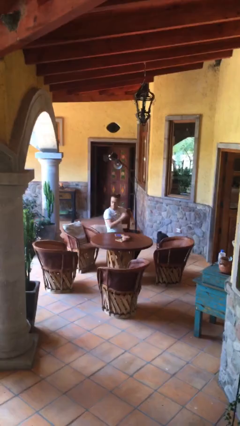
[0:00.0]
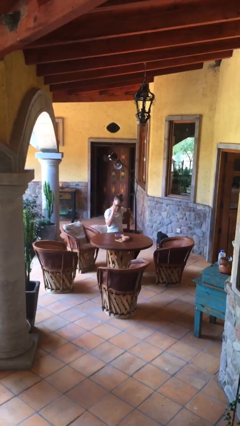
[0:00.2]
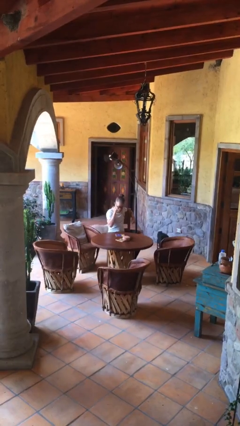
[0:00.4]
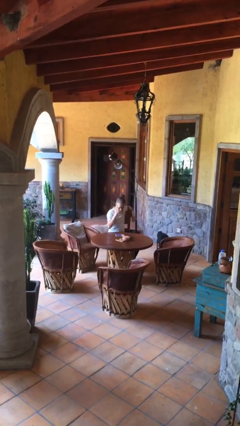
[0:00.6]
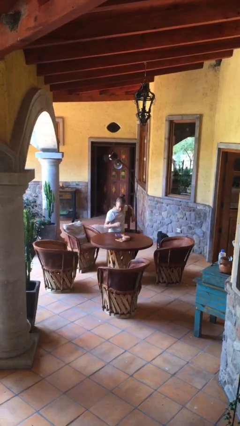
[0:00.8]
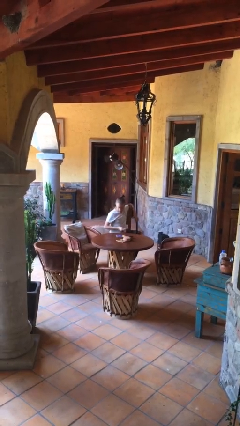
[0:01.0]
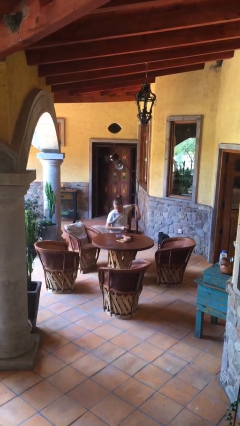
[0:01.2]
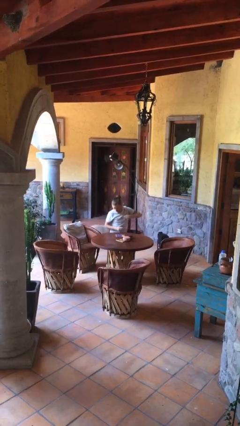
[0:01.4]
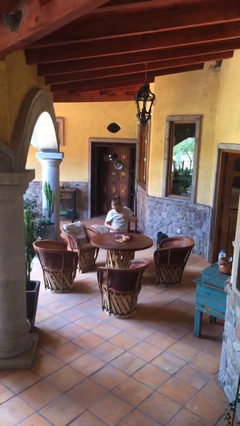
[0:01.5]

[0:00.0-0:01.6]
person takes off glasses

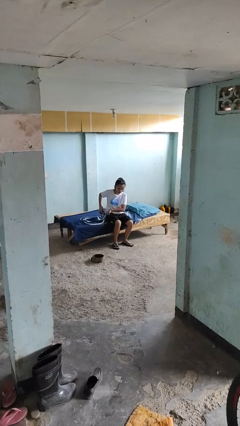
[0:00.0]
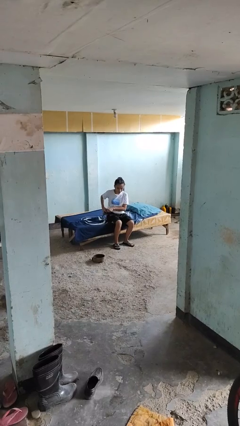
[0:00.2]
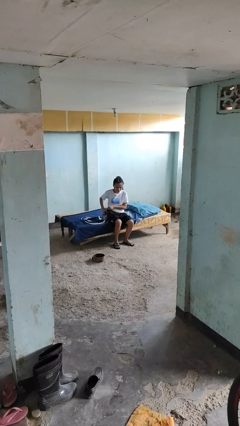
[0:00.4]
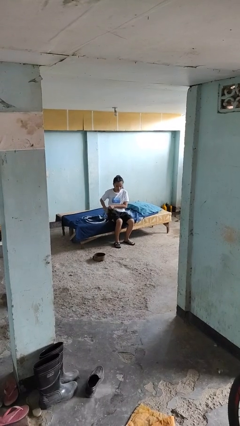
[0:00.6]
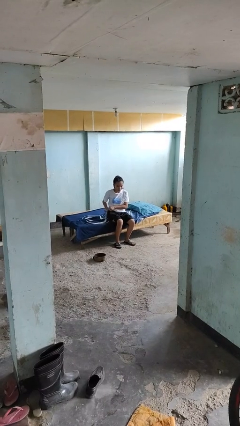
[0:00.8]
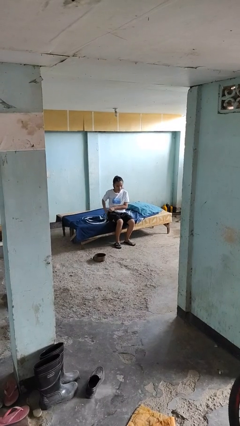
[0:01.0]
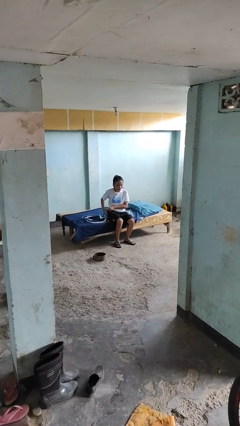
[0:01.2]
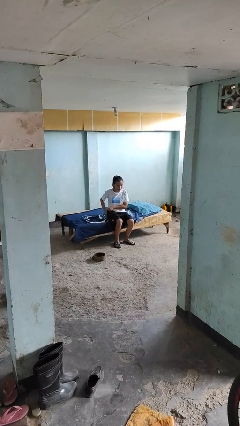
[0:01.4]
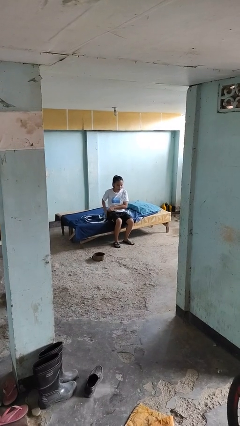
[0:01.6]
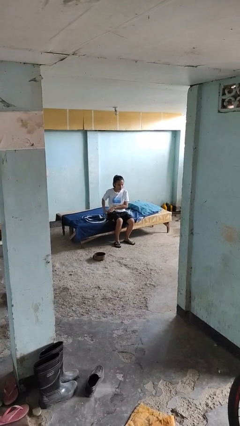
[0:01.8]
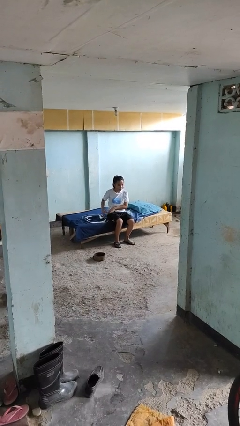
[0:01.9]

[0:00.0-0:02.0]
person puts phone into pocket

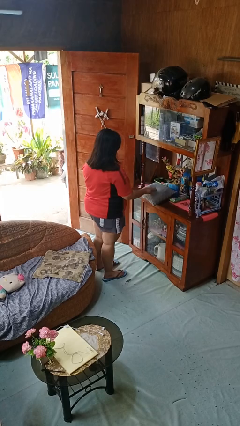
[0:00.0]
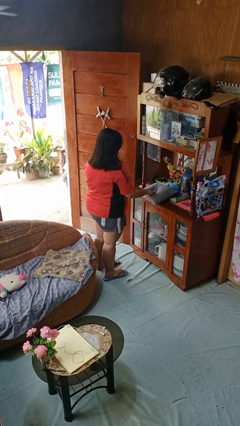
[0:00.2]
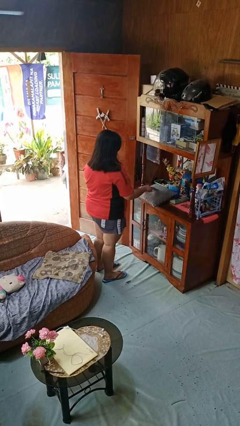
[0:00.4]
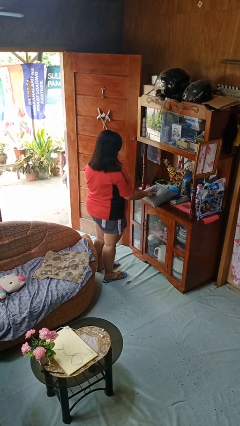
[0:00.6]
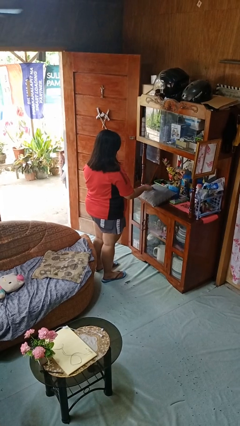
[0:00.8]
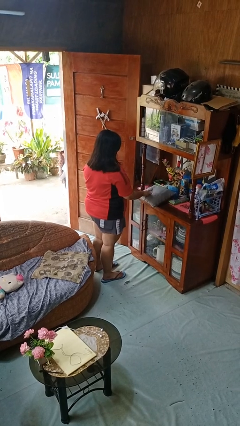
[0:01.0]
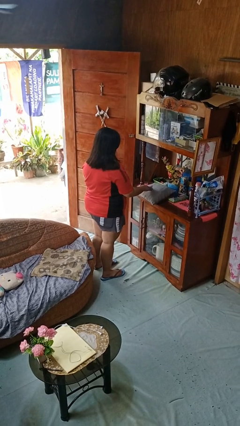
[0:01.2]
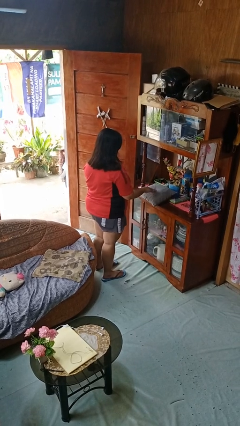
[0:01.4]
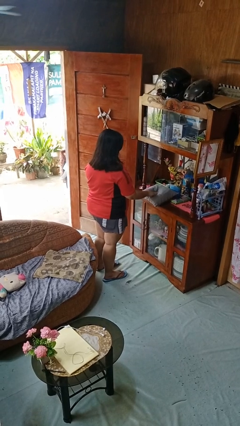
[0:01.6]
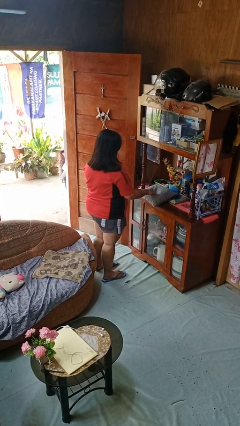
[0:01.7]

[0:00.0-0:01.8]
person taps object with finger

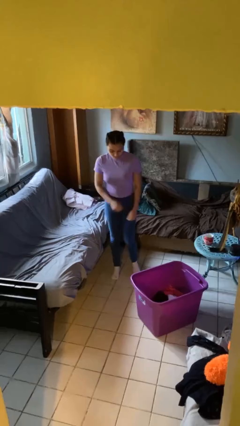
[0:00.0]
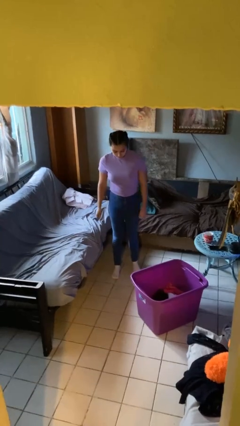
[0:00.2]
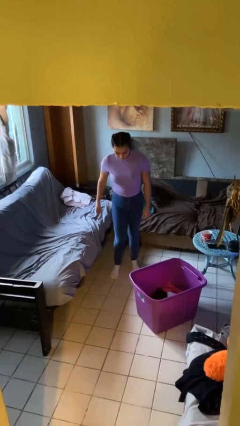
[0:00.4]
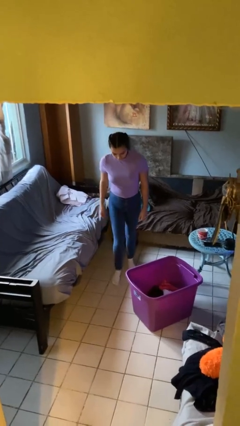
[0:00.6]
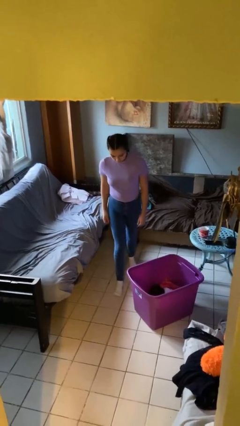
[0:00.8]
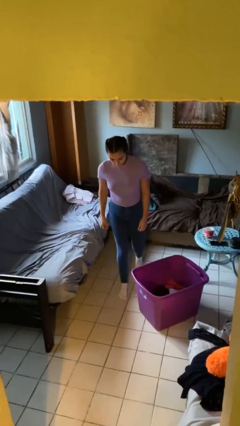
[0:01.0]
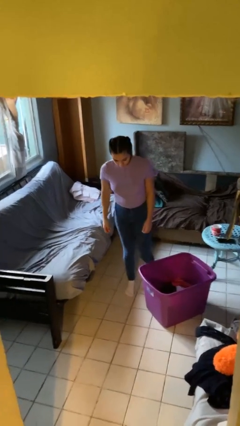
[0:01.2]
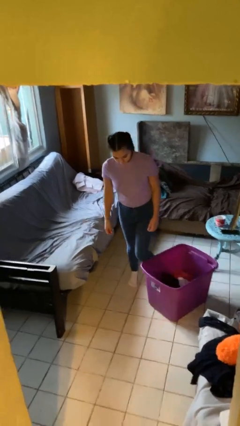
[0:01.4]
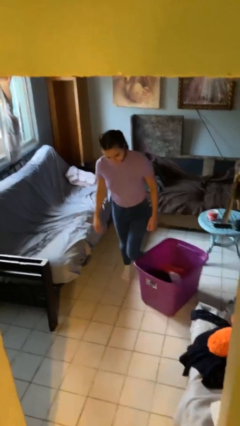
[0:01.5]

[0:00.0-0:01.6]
person trips on object on floor

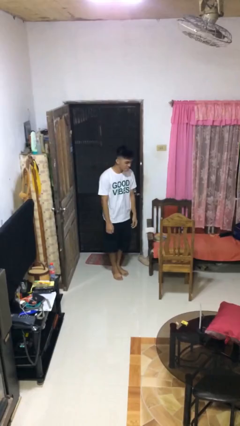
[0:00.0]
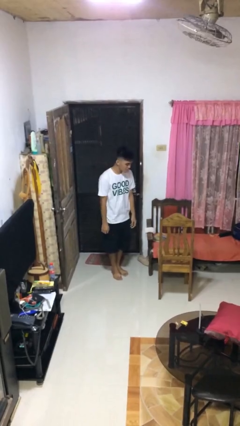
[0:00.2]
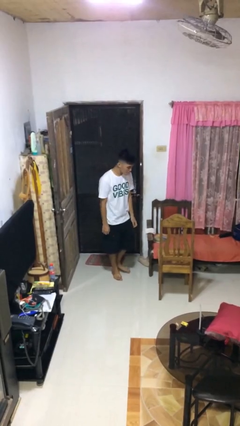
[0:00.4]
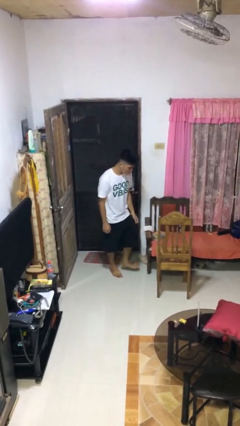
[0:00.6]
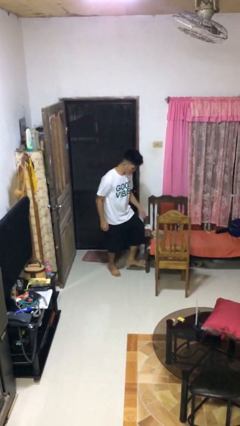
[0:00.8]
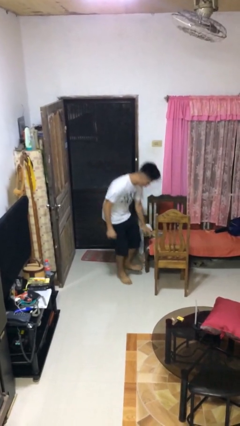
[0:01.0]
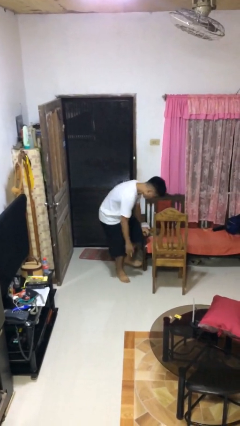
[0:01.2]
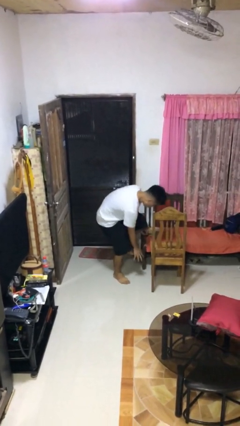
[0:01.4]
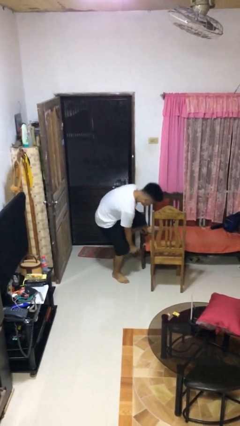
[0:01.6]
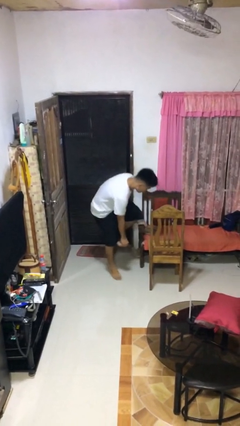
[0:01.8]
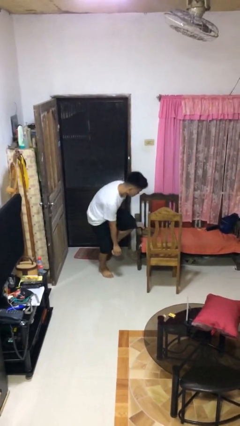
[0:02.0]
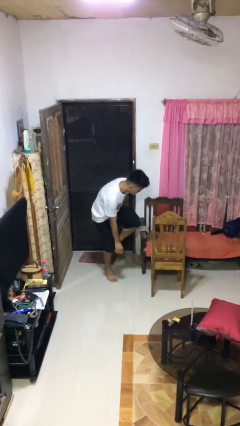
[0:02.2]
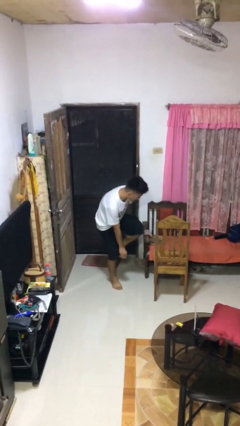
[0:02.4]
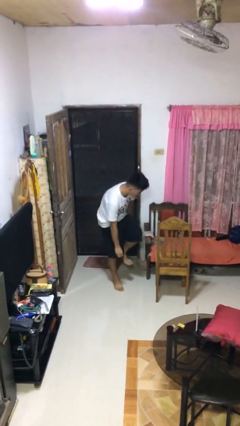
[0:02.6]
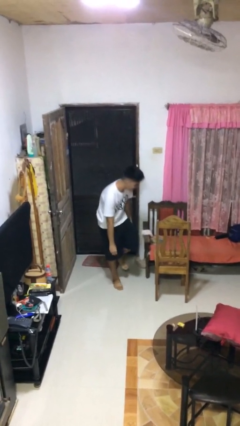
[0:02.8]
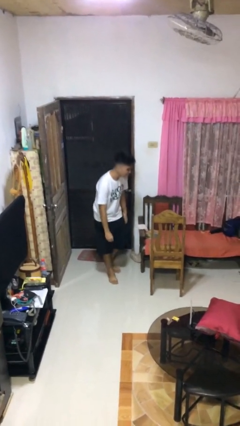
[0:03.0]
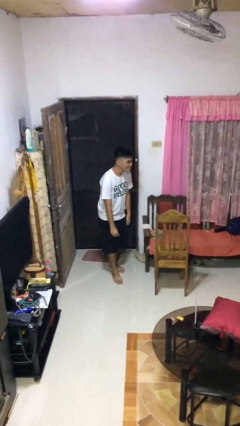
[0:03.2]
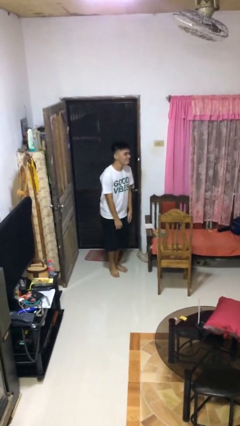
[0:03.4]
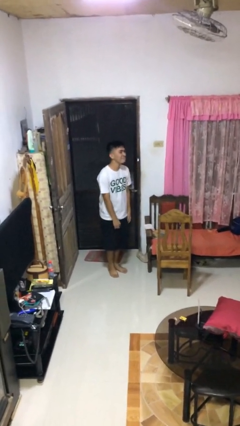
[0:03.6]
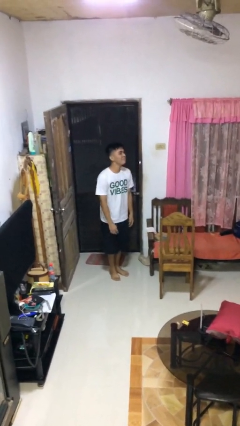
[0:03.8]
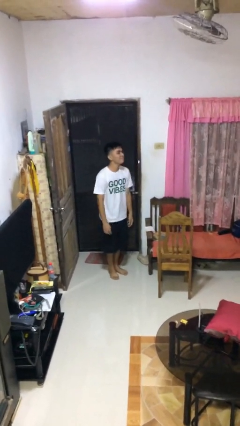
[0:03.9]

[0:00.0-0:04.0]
person stubs toe

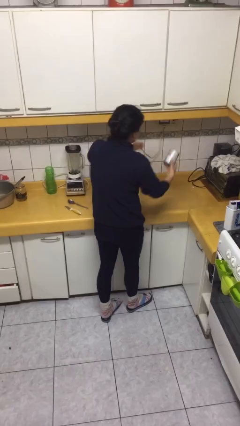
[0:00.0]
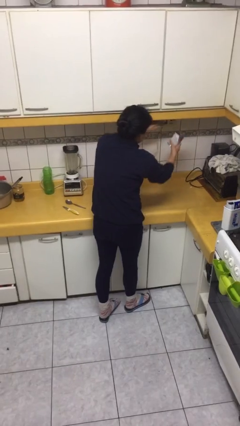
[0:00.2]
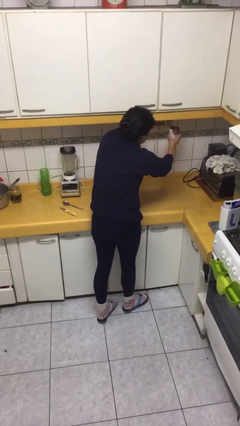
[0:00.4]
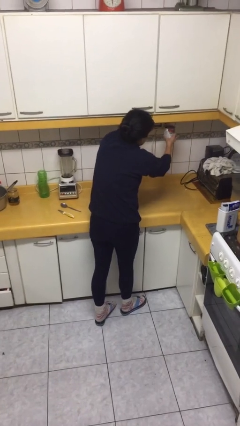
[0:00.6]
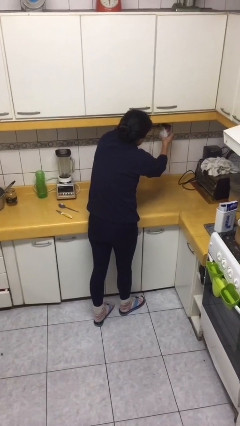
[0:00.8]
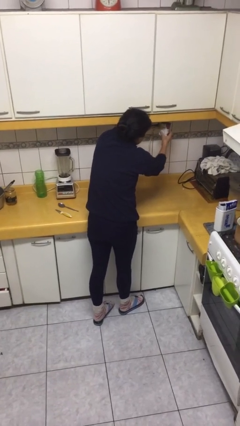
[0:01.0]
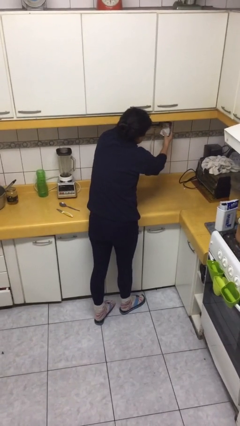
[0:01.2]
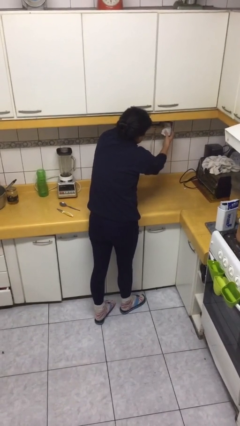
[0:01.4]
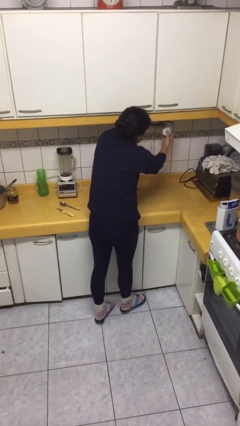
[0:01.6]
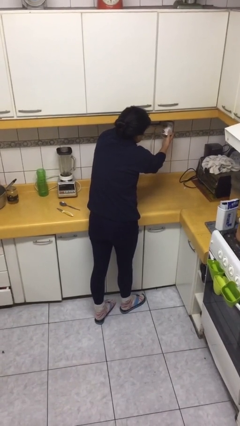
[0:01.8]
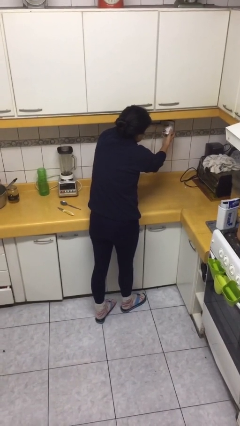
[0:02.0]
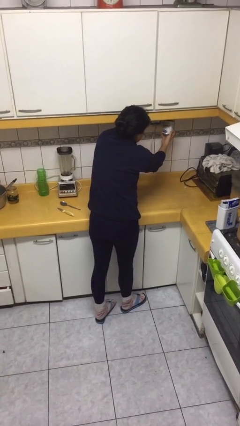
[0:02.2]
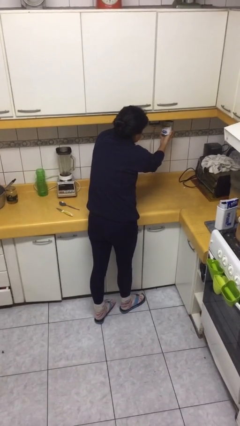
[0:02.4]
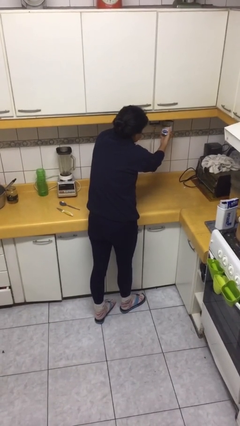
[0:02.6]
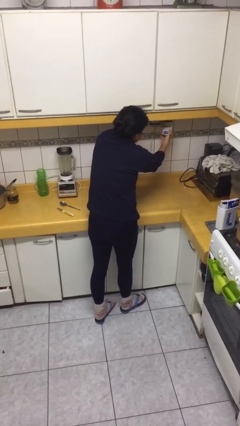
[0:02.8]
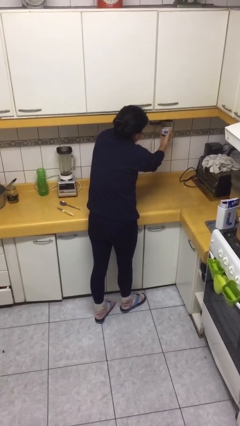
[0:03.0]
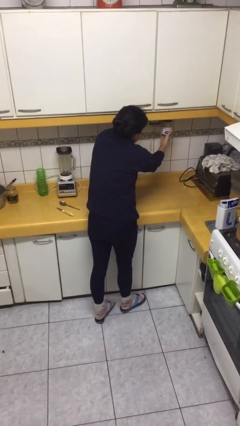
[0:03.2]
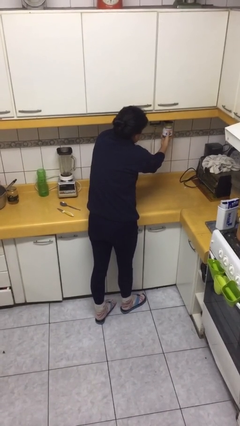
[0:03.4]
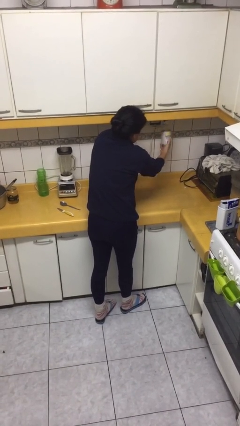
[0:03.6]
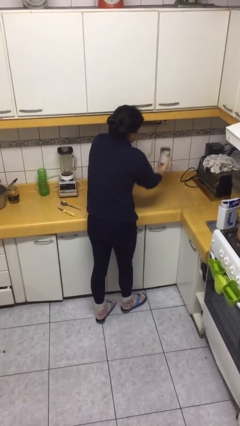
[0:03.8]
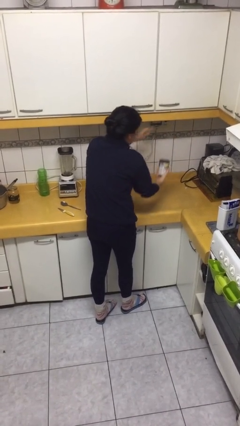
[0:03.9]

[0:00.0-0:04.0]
person opens can with can opener

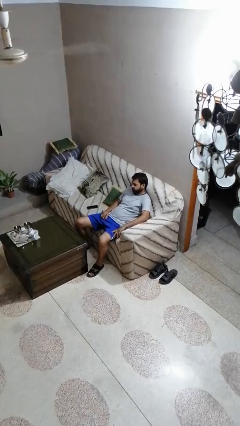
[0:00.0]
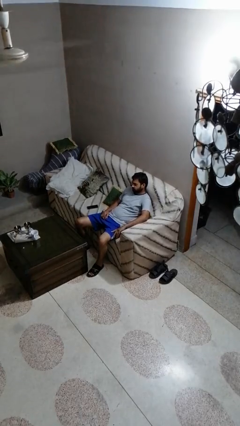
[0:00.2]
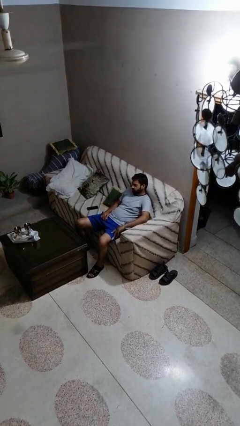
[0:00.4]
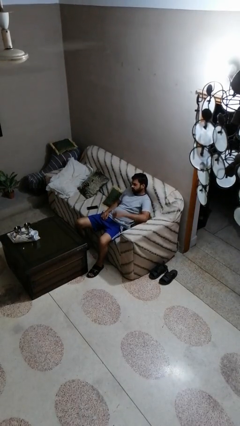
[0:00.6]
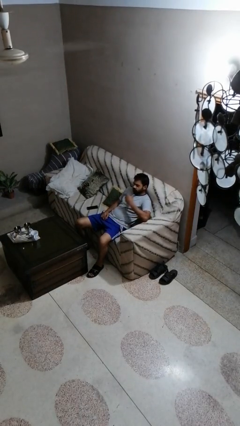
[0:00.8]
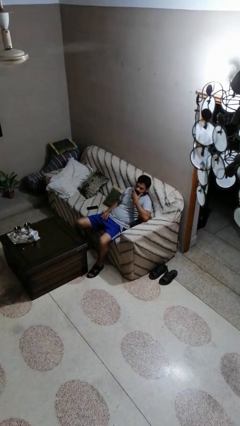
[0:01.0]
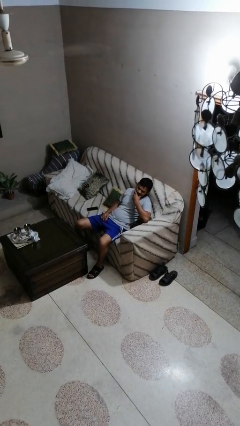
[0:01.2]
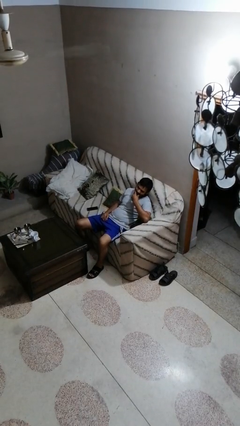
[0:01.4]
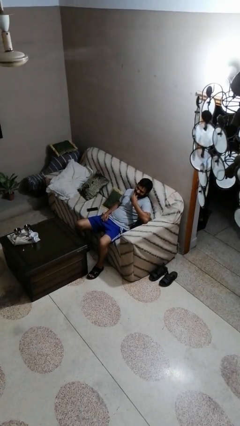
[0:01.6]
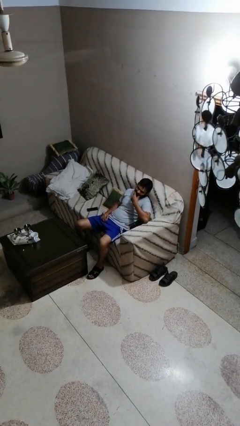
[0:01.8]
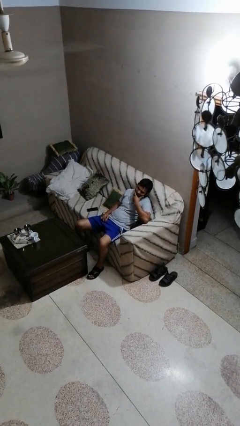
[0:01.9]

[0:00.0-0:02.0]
person strokes chin
